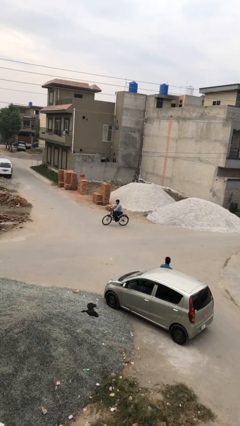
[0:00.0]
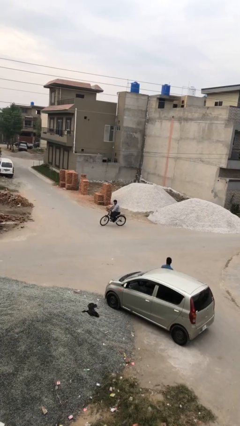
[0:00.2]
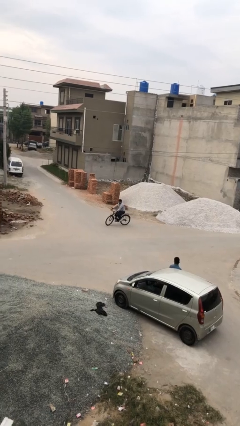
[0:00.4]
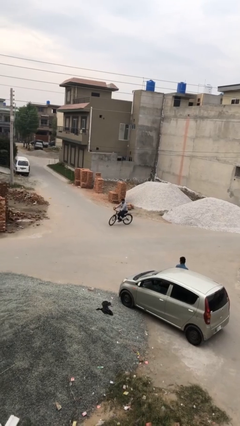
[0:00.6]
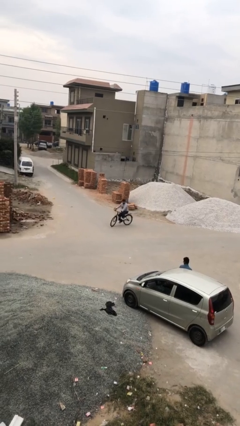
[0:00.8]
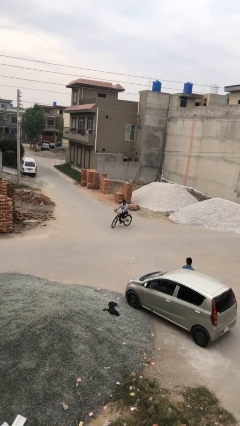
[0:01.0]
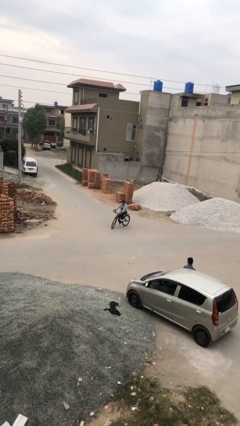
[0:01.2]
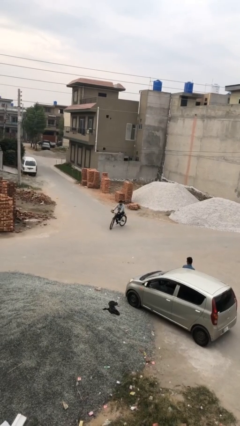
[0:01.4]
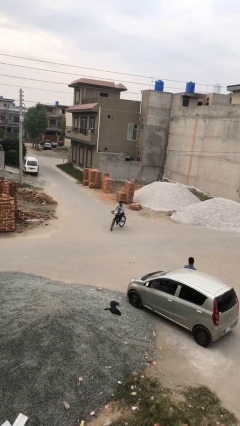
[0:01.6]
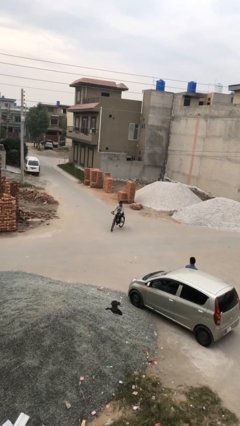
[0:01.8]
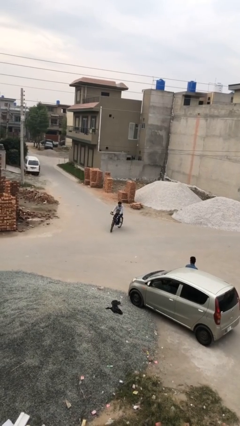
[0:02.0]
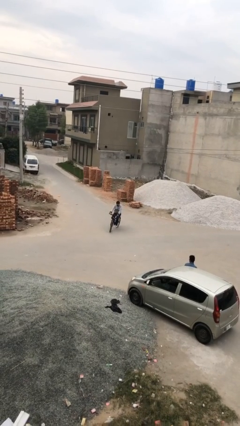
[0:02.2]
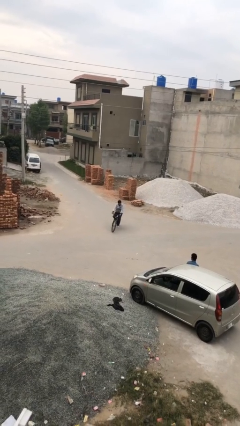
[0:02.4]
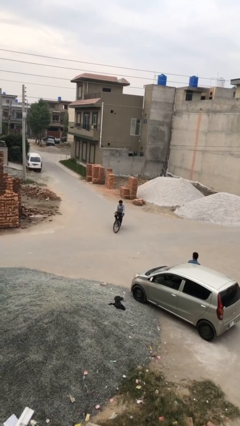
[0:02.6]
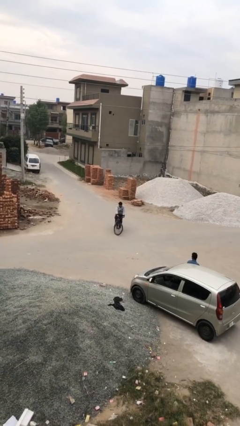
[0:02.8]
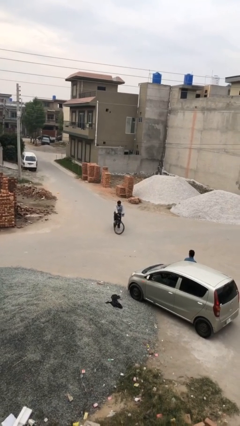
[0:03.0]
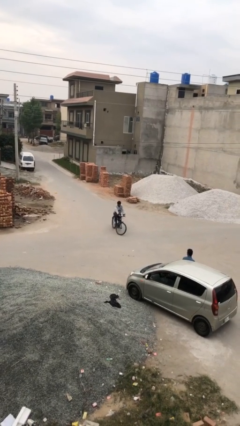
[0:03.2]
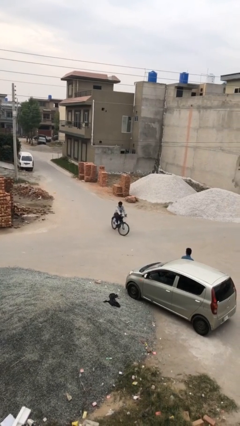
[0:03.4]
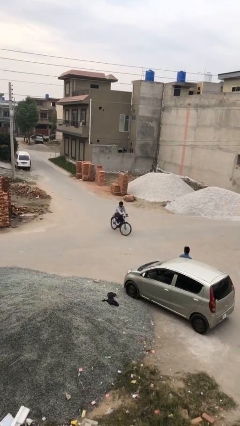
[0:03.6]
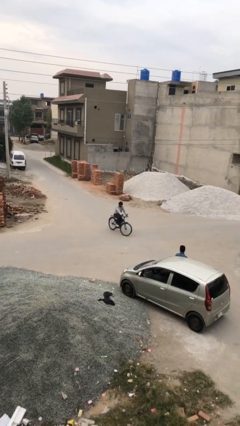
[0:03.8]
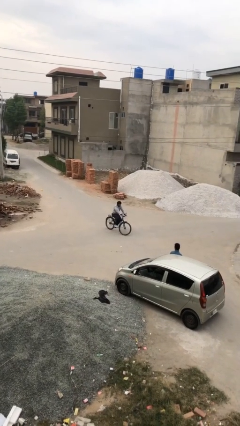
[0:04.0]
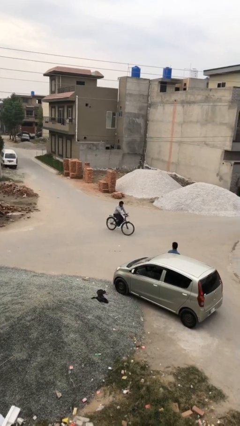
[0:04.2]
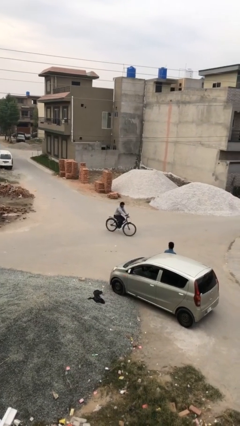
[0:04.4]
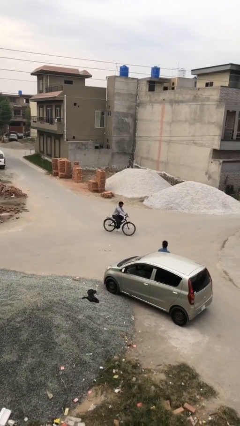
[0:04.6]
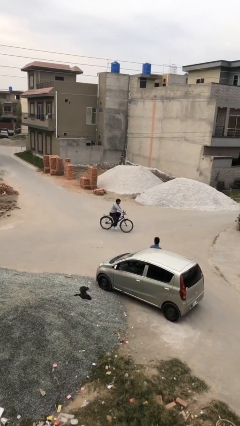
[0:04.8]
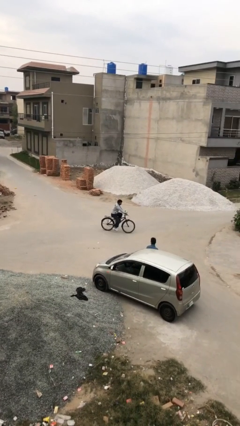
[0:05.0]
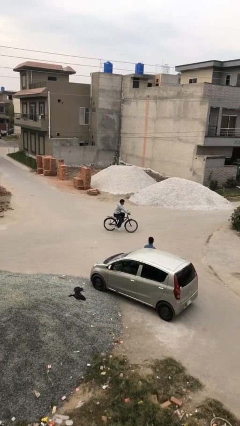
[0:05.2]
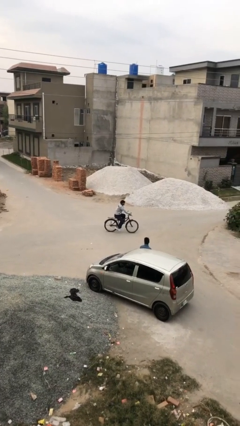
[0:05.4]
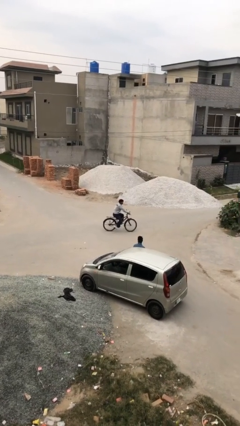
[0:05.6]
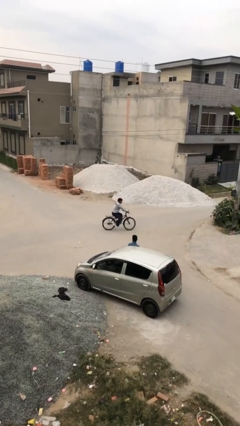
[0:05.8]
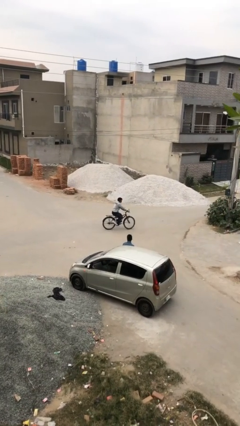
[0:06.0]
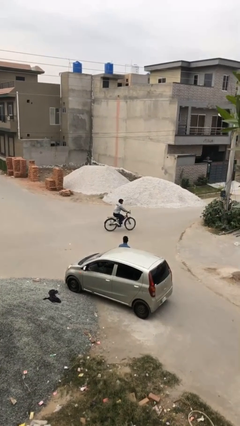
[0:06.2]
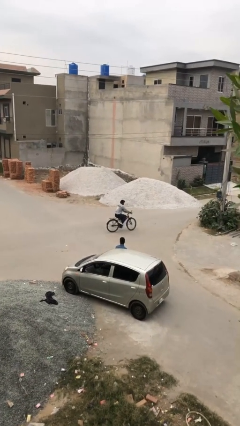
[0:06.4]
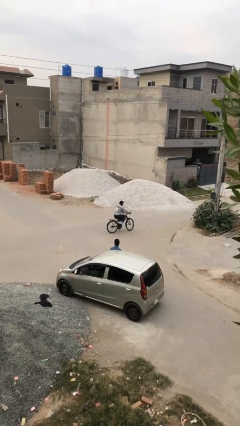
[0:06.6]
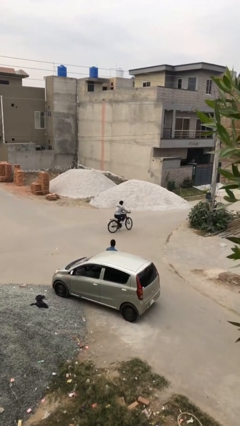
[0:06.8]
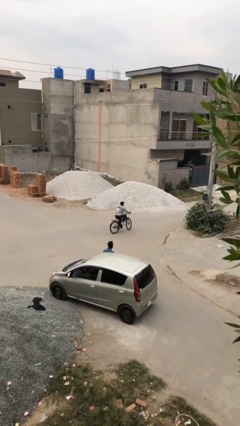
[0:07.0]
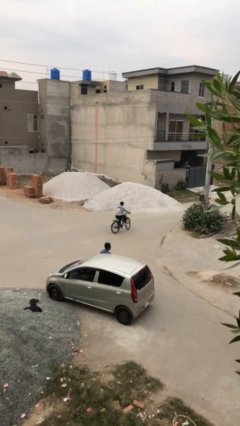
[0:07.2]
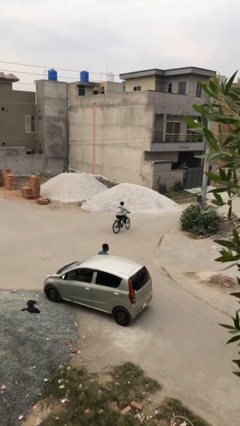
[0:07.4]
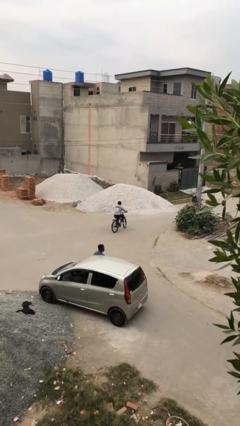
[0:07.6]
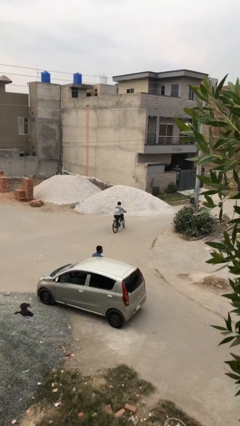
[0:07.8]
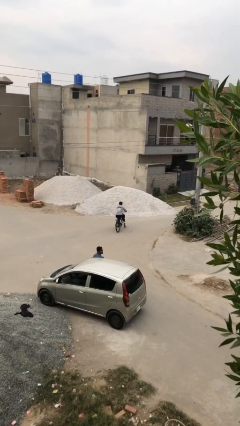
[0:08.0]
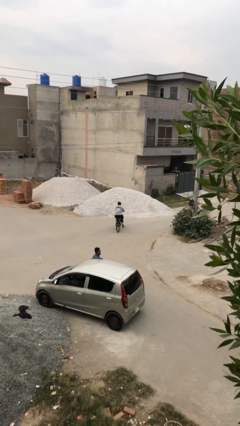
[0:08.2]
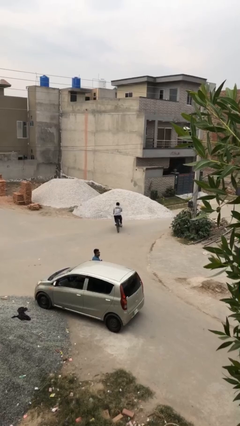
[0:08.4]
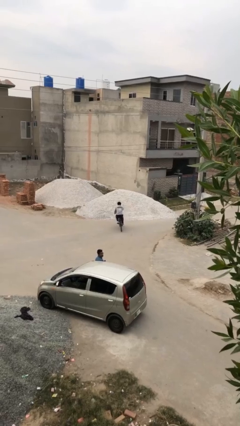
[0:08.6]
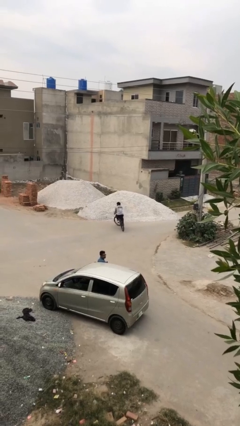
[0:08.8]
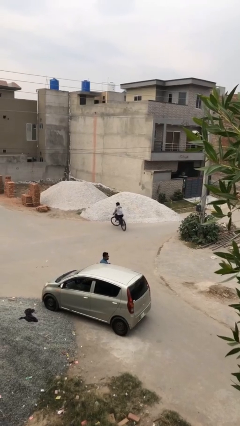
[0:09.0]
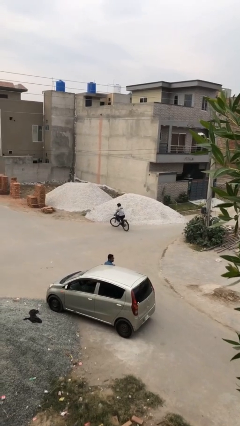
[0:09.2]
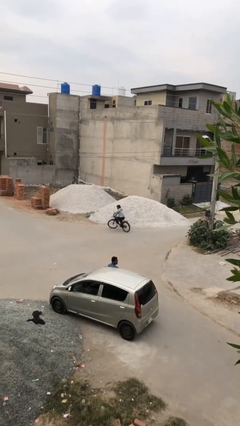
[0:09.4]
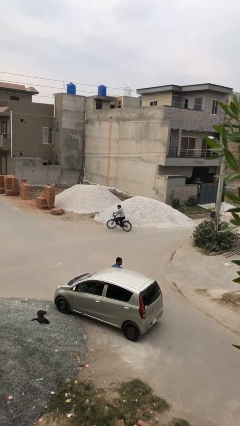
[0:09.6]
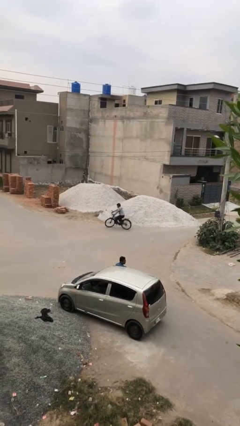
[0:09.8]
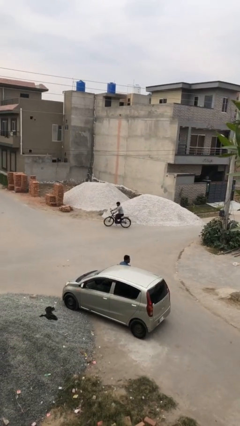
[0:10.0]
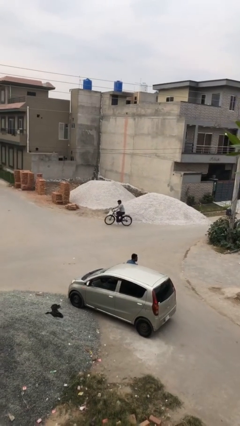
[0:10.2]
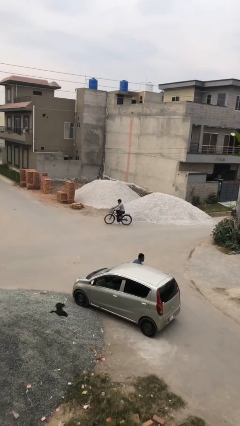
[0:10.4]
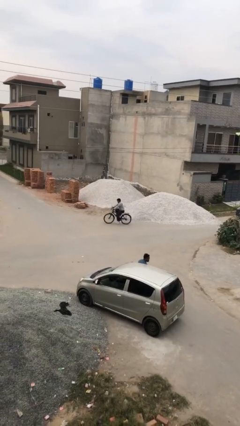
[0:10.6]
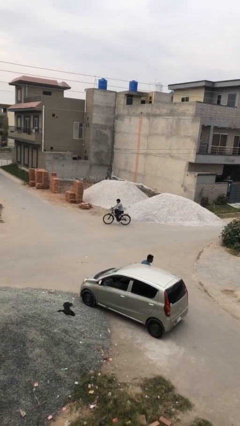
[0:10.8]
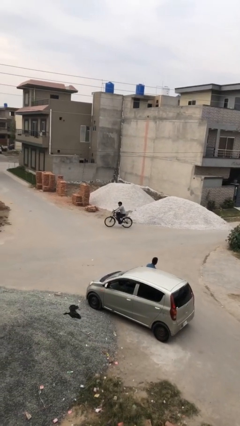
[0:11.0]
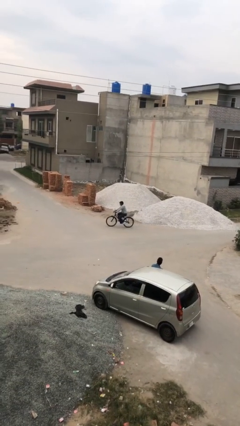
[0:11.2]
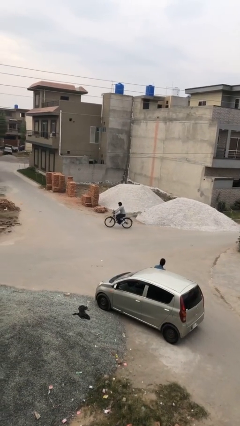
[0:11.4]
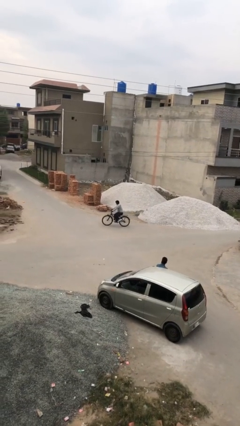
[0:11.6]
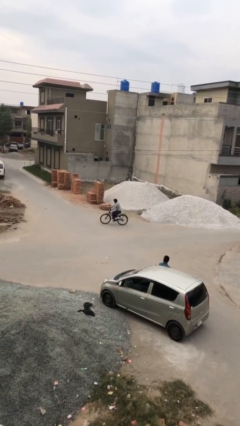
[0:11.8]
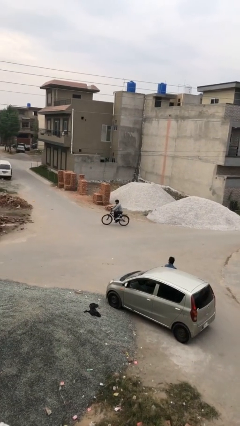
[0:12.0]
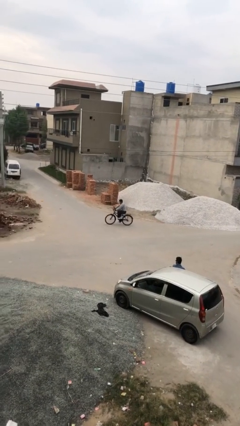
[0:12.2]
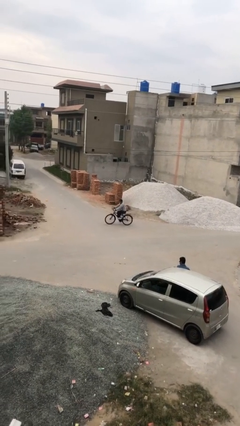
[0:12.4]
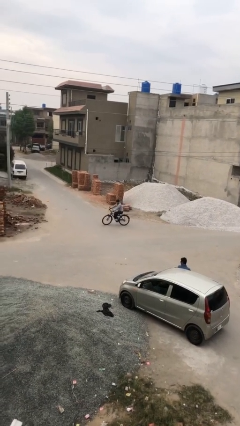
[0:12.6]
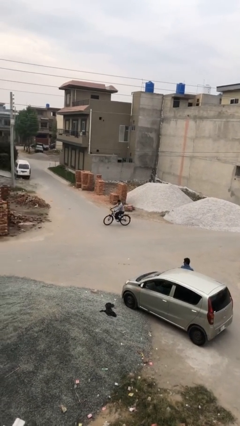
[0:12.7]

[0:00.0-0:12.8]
person rides bicycle

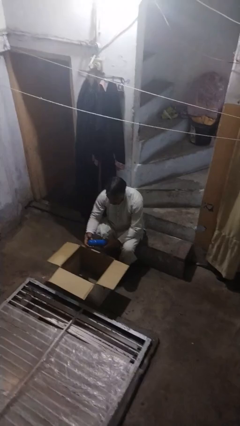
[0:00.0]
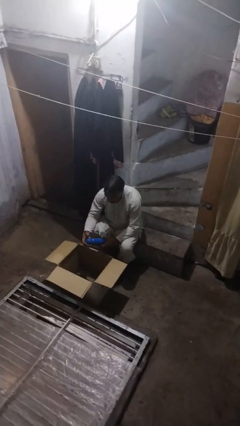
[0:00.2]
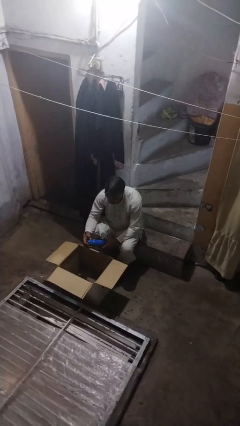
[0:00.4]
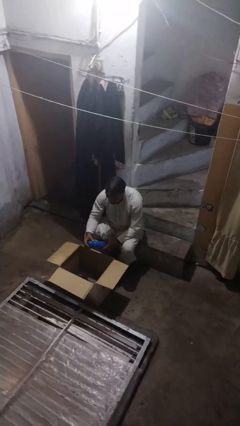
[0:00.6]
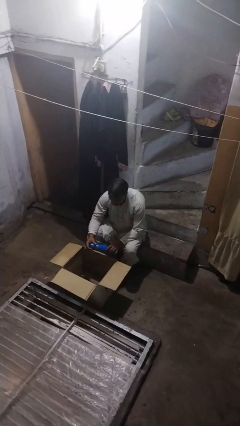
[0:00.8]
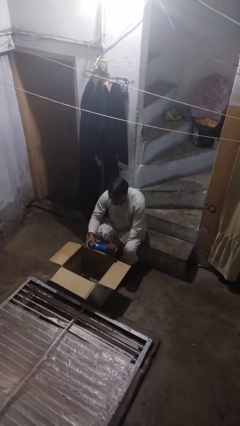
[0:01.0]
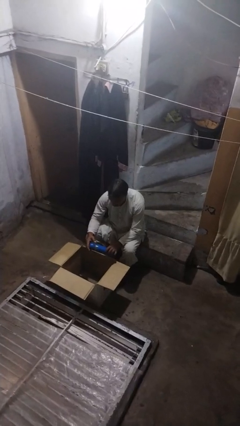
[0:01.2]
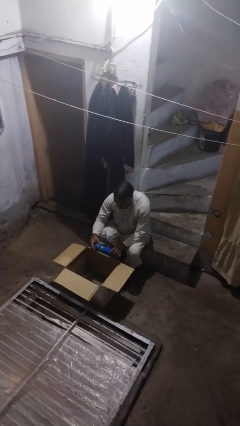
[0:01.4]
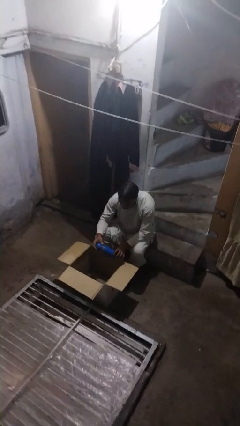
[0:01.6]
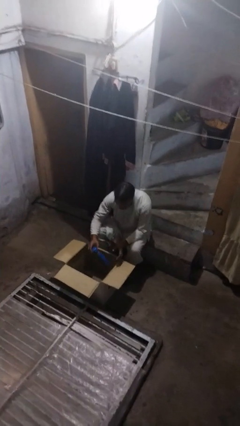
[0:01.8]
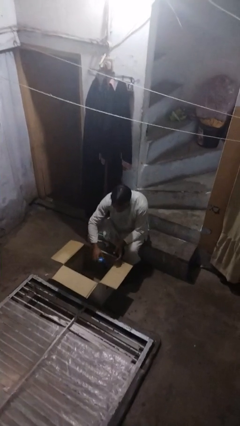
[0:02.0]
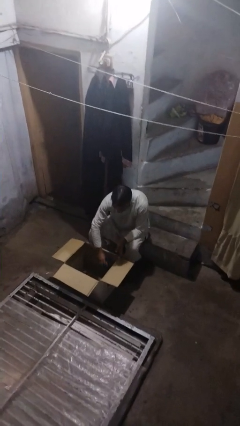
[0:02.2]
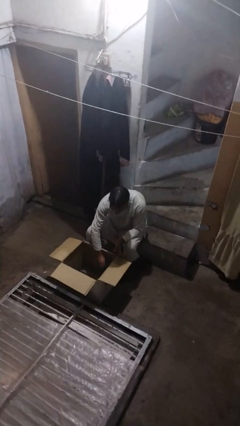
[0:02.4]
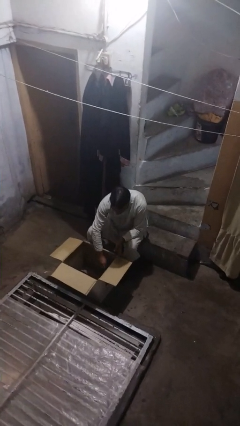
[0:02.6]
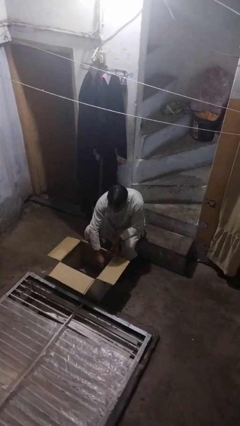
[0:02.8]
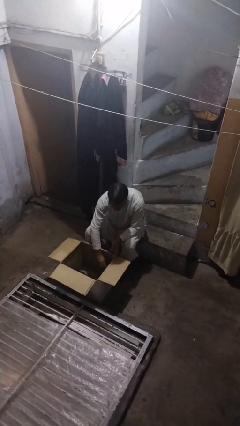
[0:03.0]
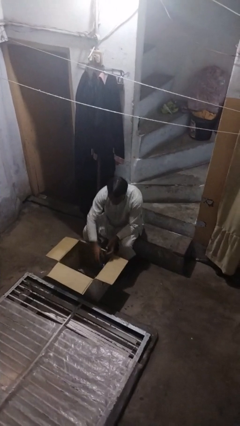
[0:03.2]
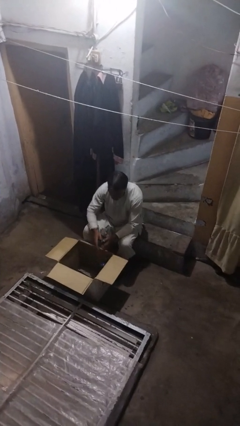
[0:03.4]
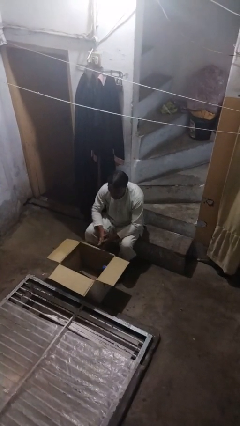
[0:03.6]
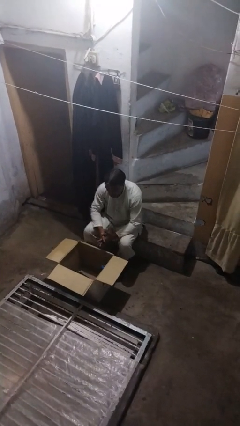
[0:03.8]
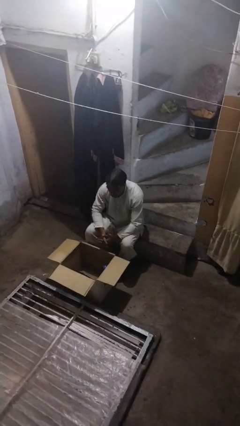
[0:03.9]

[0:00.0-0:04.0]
person puts object into box

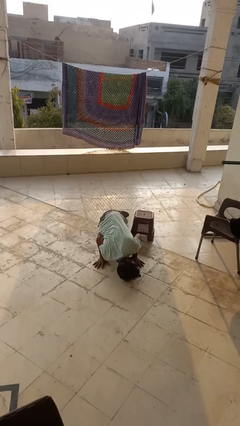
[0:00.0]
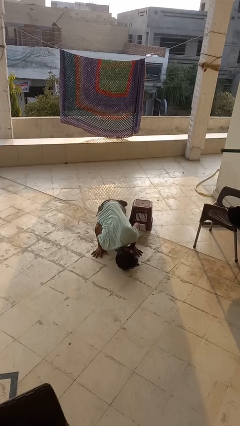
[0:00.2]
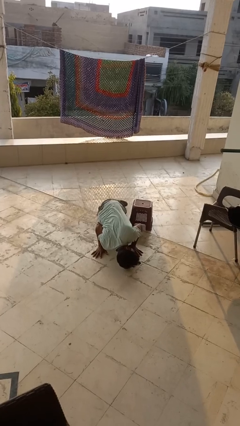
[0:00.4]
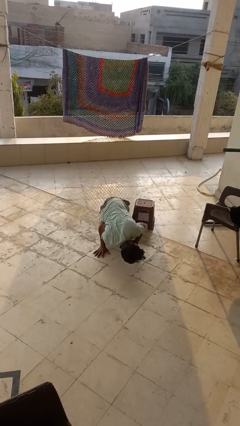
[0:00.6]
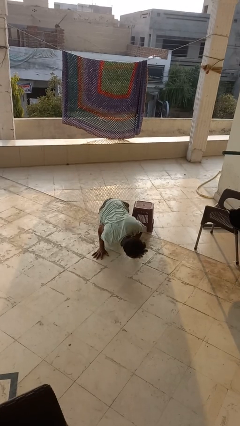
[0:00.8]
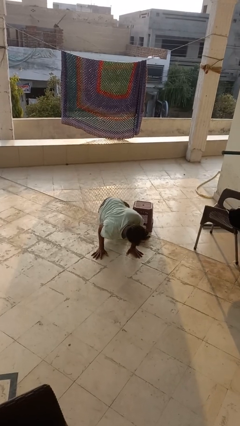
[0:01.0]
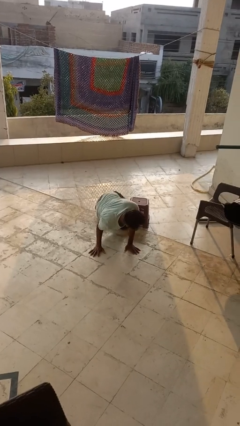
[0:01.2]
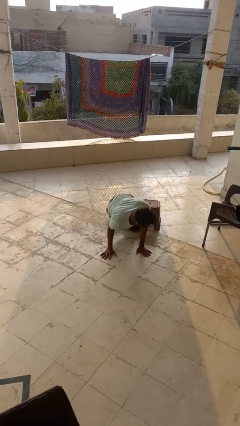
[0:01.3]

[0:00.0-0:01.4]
person lies down on floor
